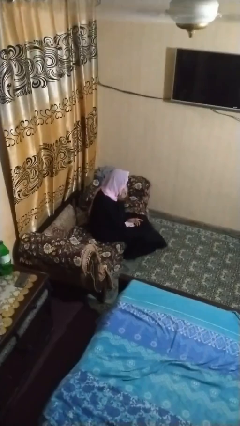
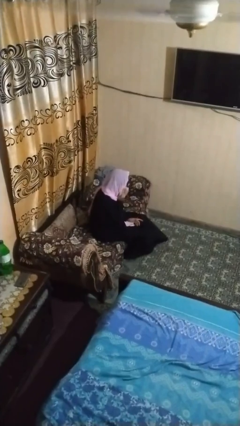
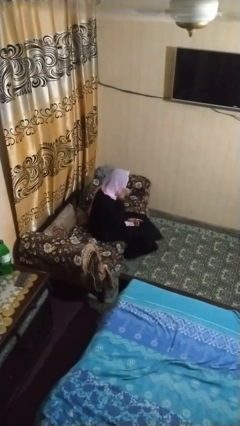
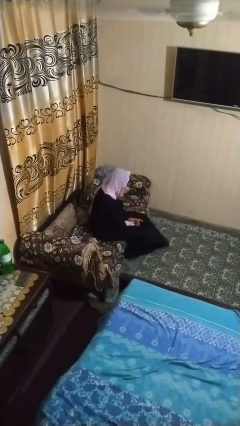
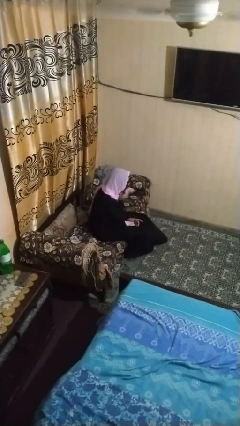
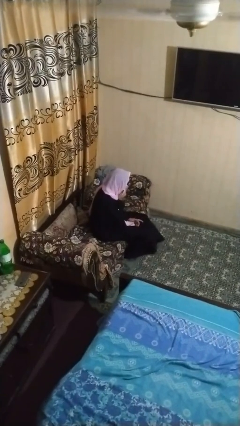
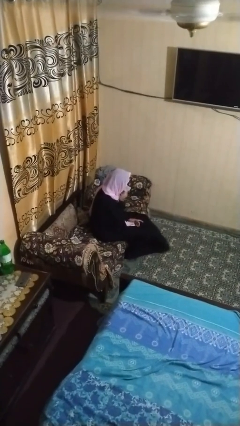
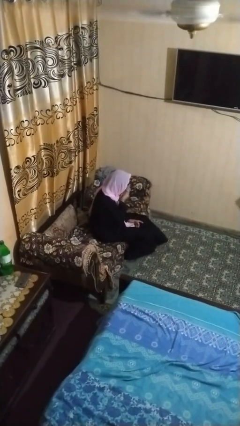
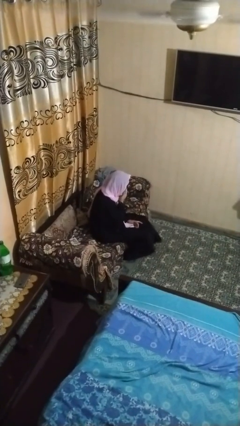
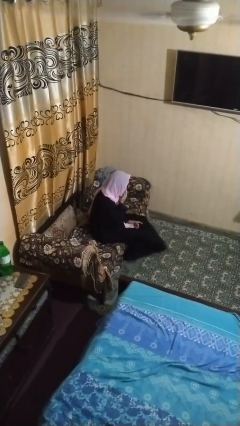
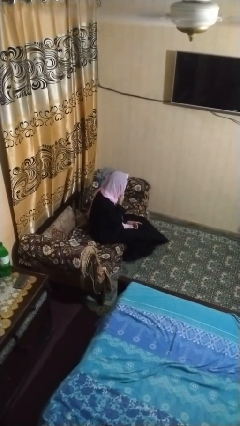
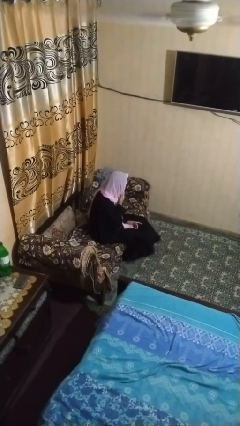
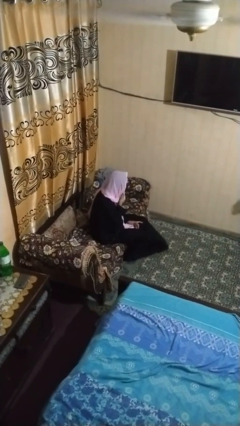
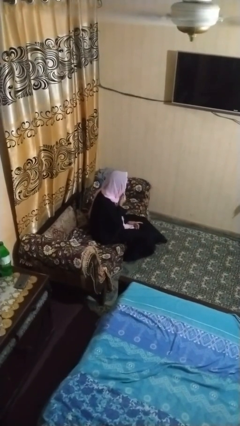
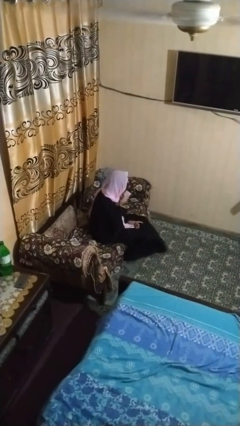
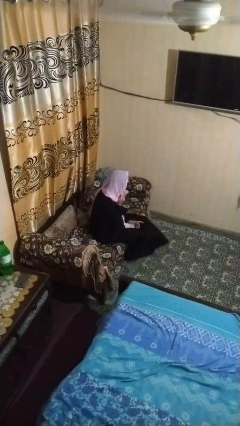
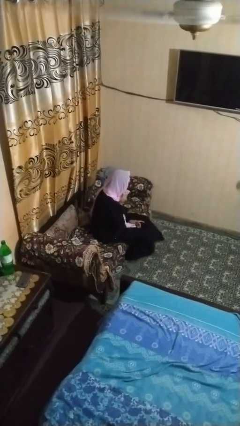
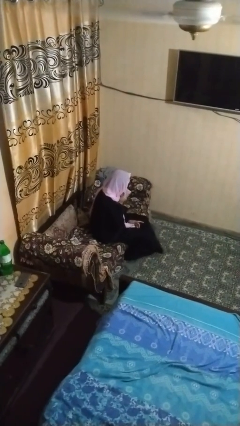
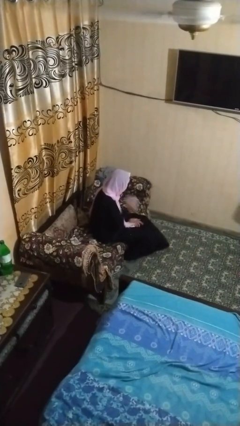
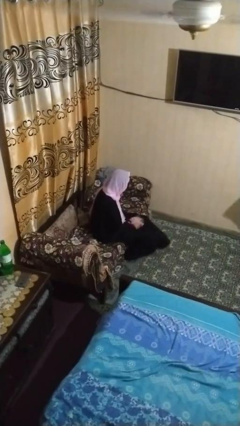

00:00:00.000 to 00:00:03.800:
person wipes mouth with napkin

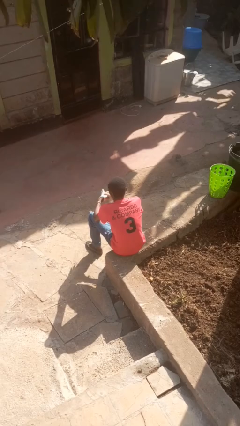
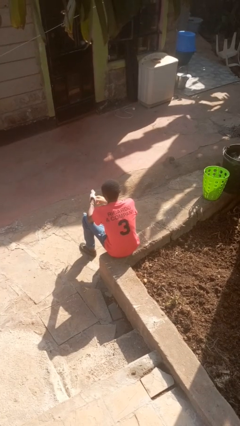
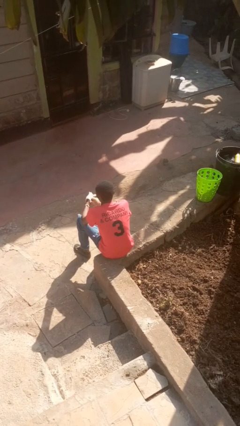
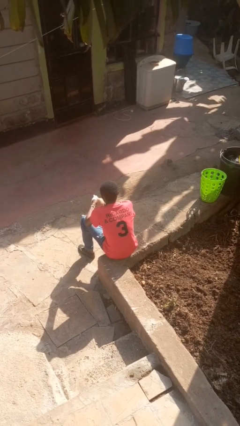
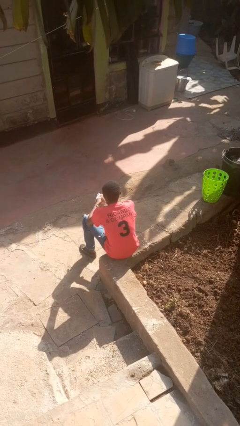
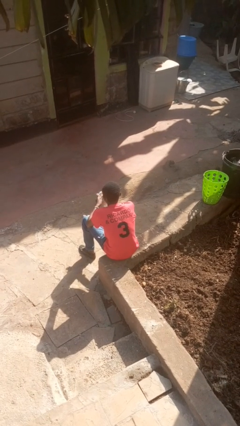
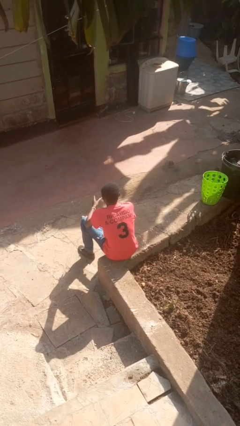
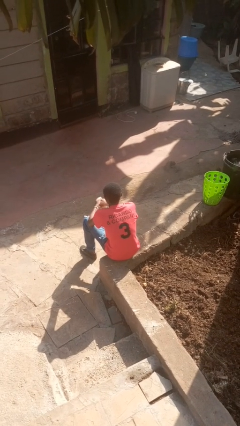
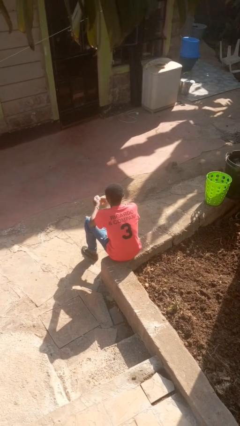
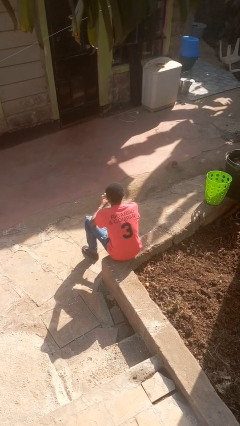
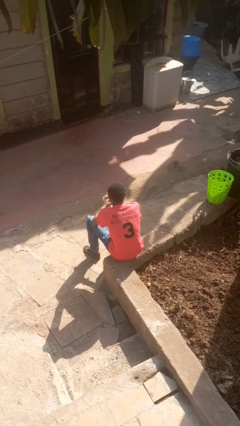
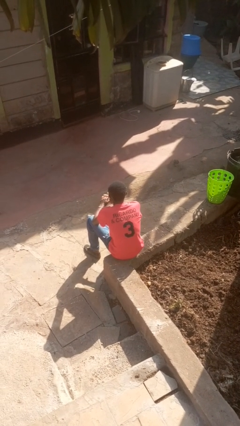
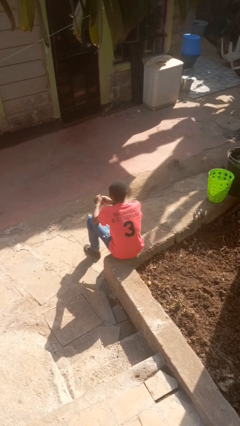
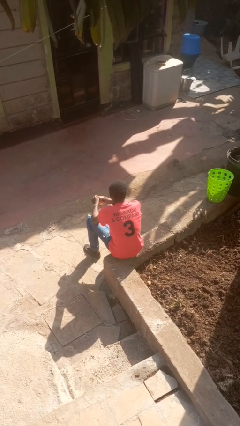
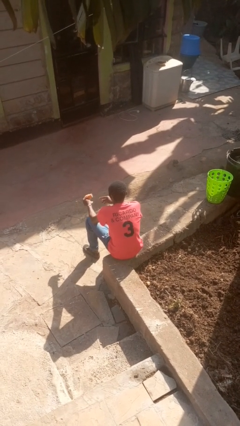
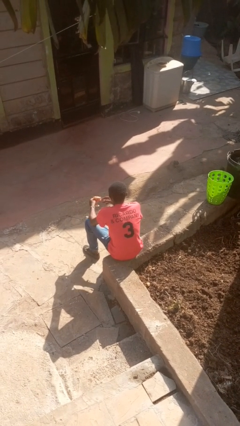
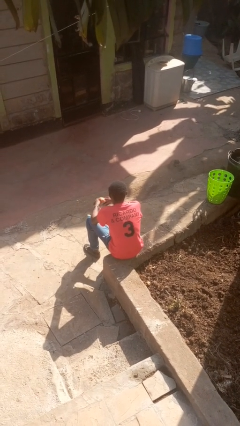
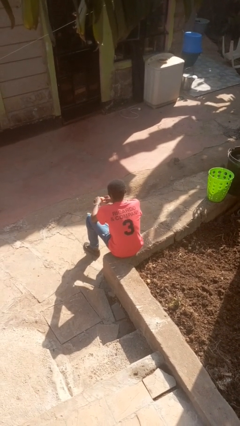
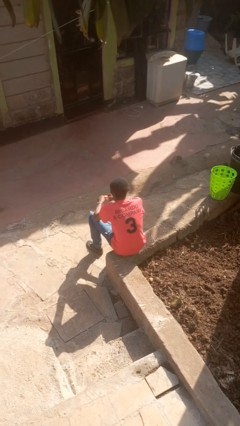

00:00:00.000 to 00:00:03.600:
person takes off gloves

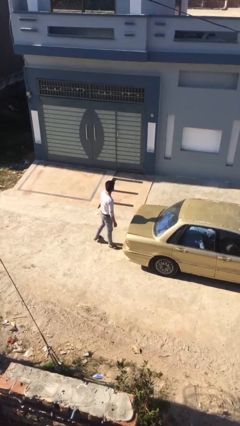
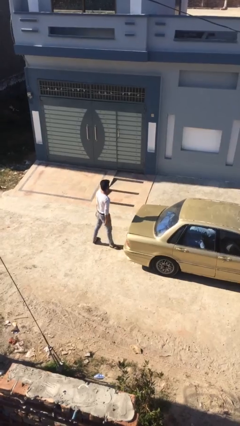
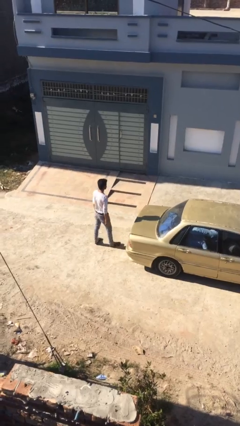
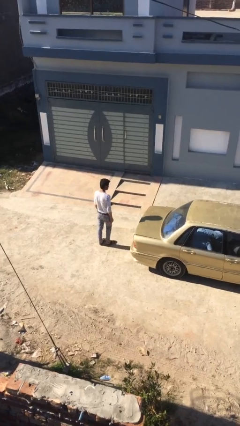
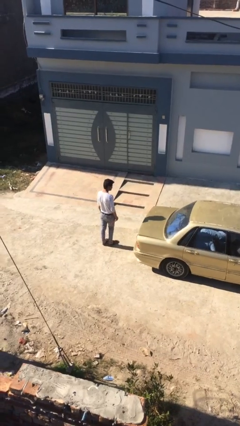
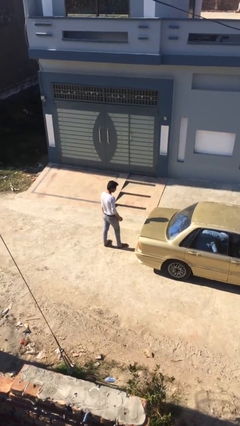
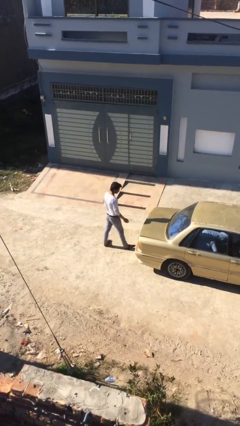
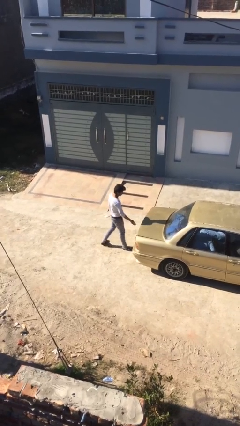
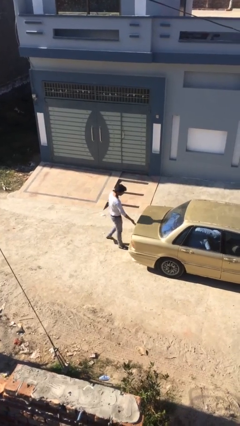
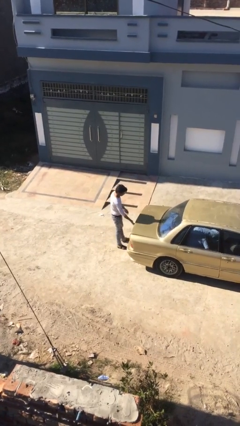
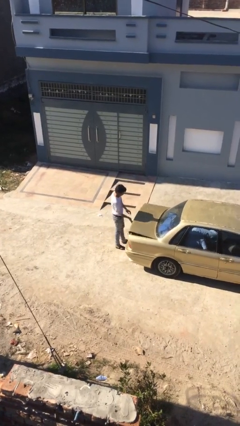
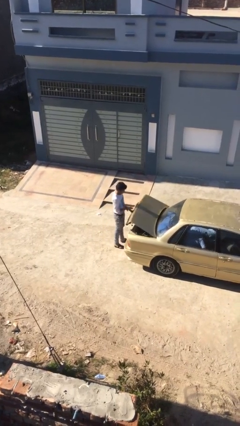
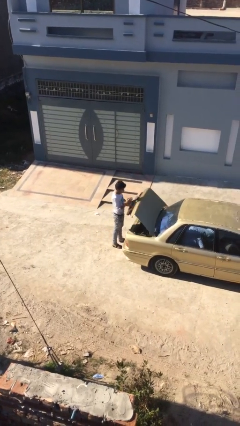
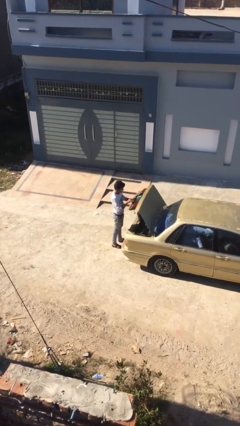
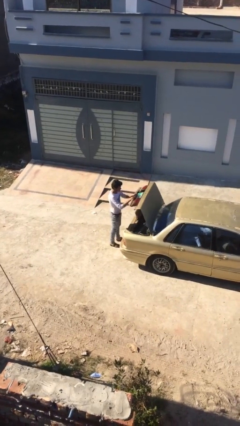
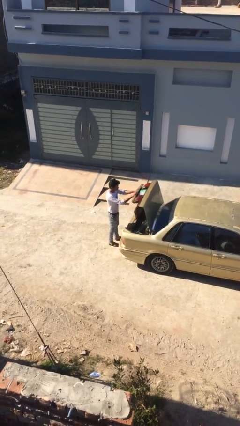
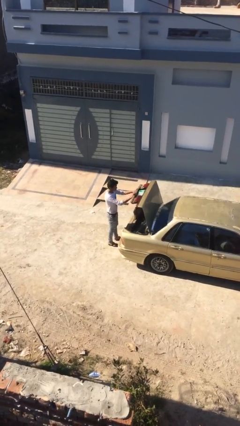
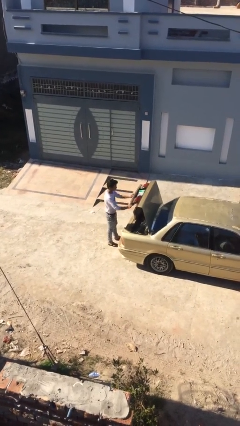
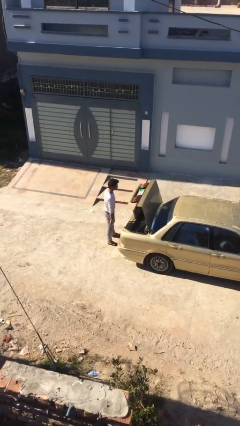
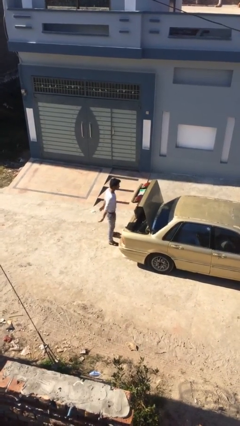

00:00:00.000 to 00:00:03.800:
person opens car trunk

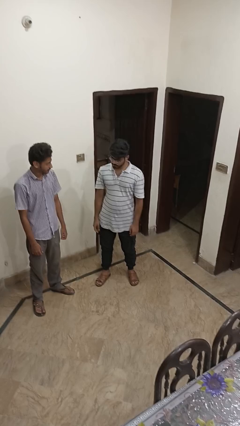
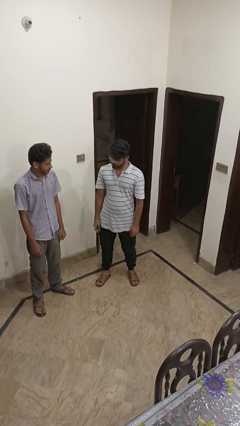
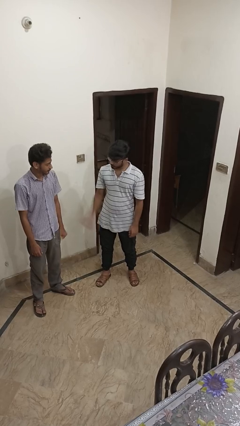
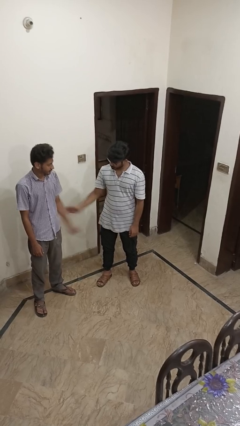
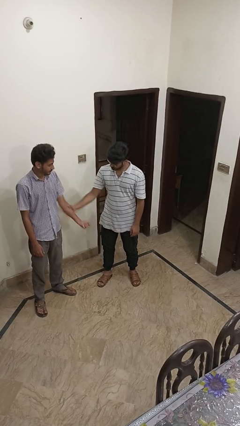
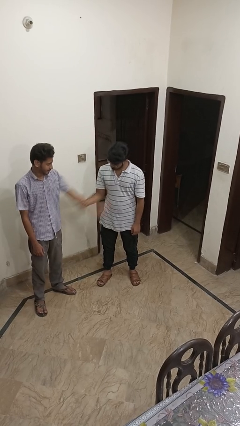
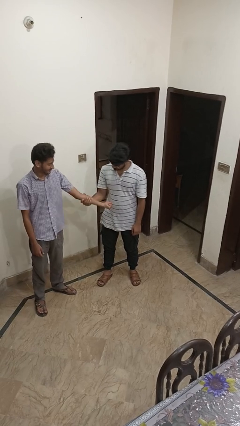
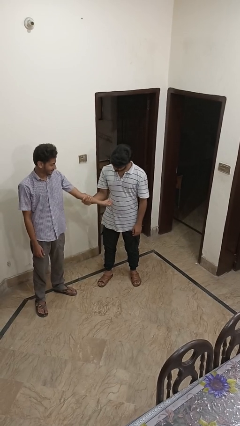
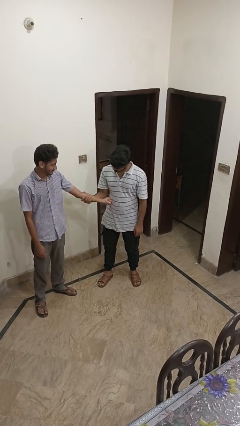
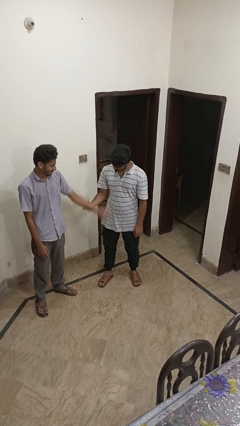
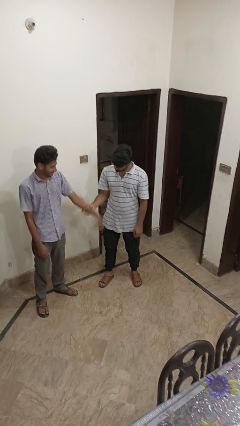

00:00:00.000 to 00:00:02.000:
person grabs person by forearm

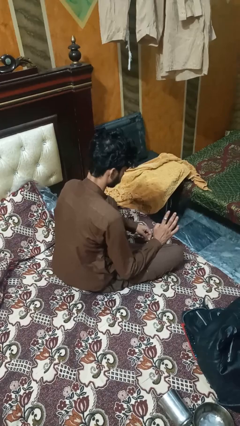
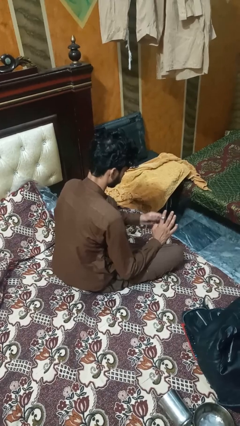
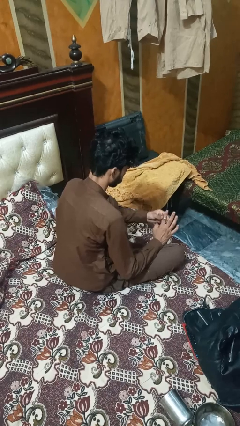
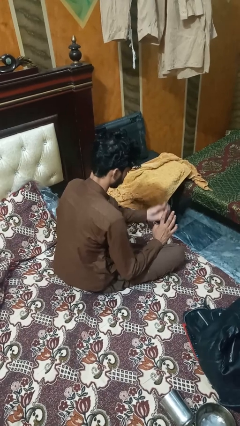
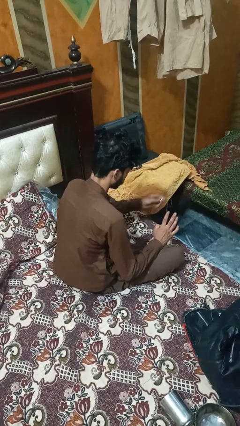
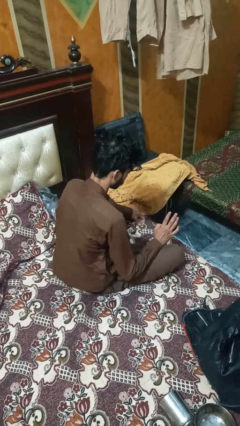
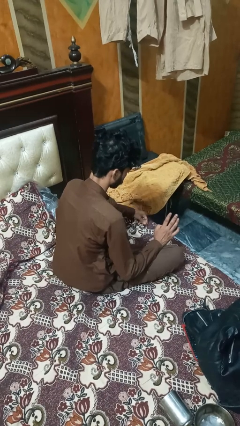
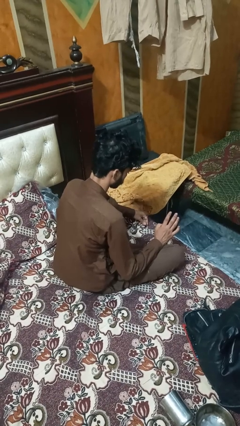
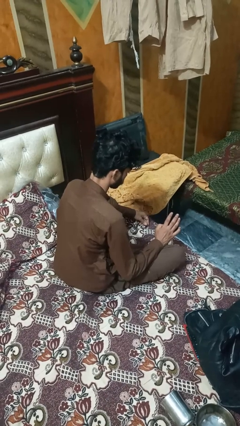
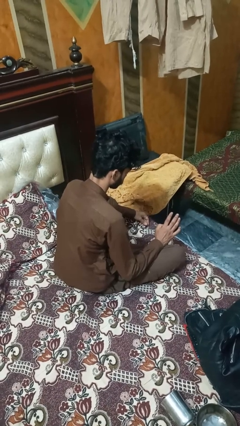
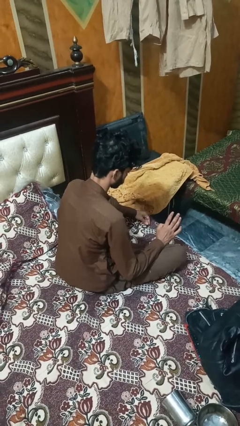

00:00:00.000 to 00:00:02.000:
person takes off ring

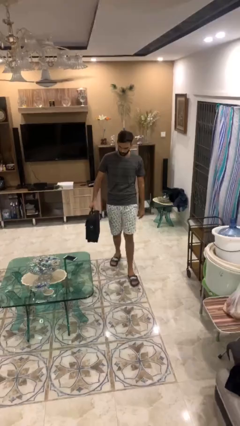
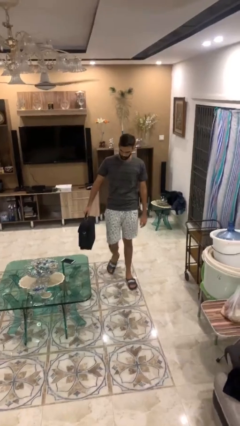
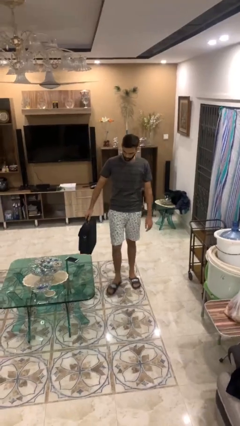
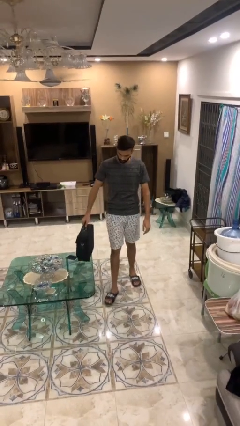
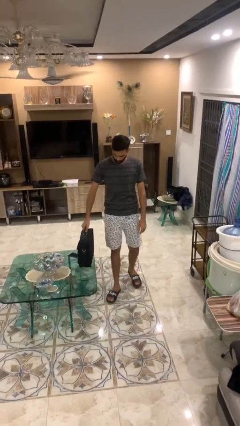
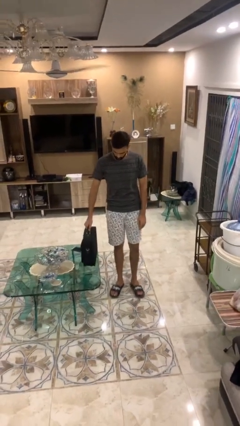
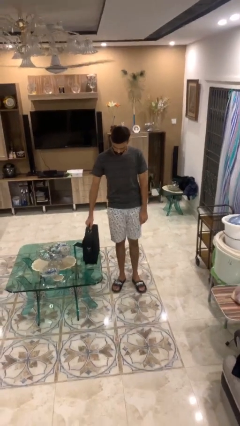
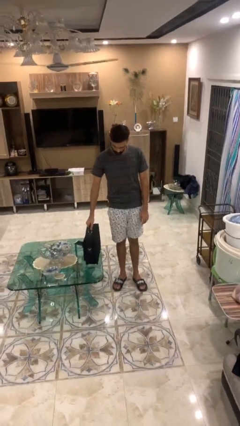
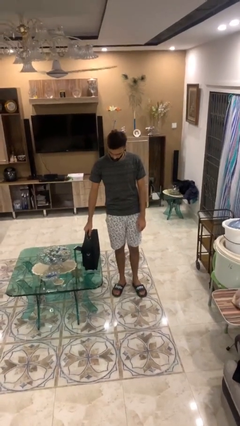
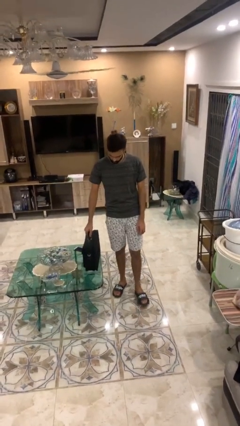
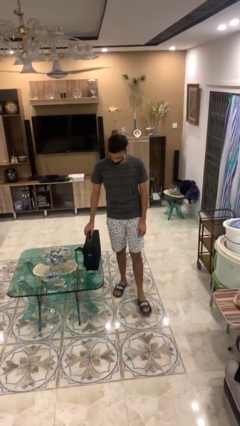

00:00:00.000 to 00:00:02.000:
person puts down object on table

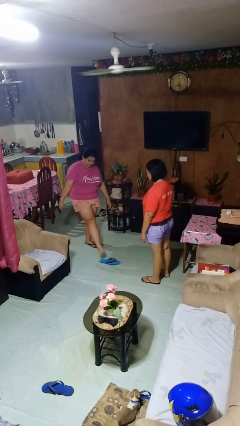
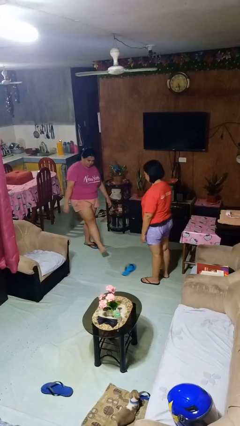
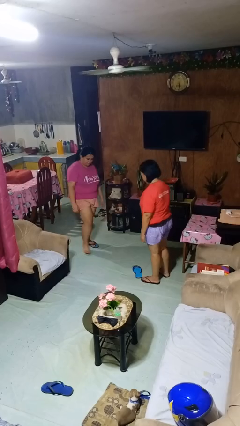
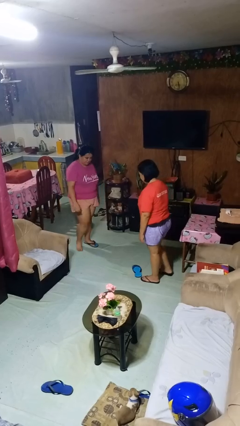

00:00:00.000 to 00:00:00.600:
person kicks object to person
